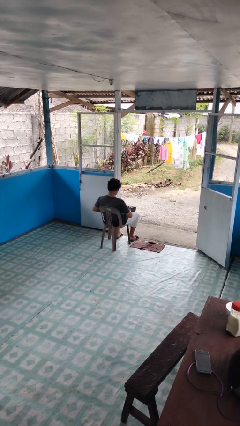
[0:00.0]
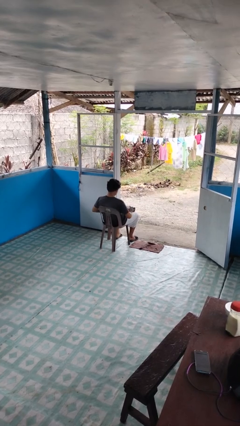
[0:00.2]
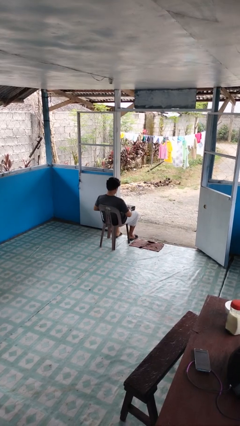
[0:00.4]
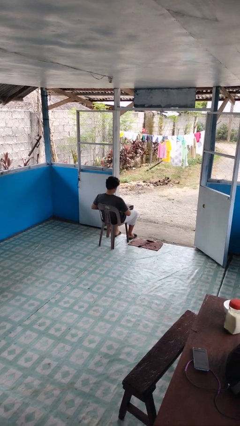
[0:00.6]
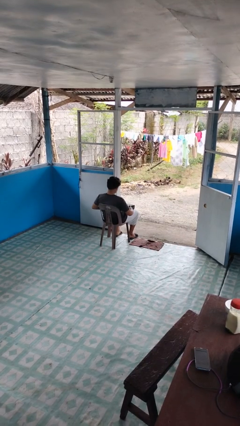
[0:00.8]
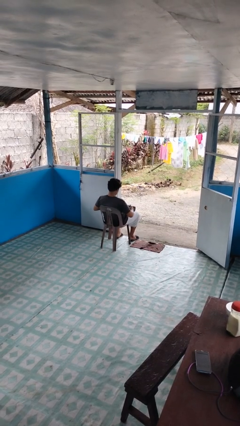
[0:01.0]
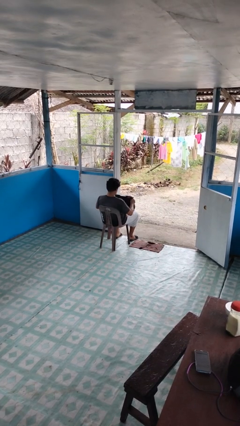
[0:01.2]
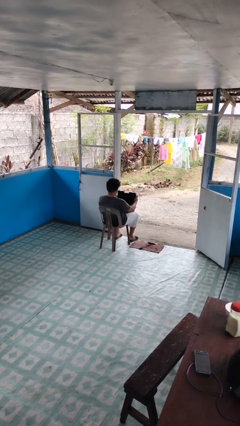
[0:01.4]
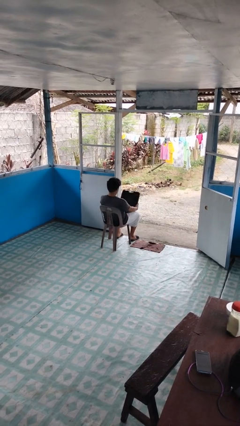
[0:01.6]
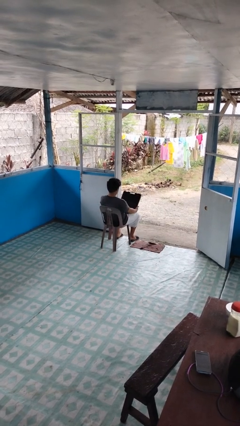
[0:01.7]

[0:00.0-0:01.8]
person opens suitcase

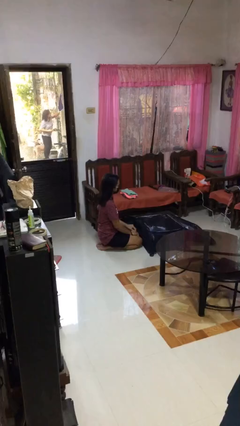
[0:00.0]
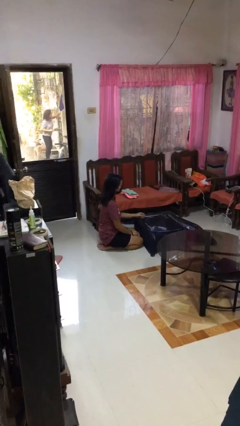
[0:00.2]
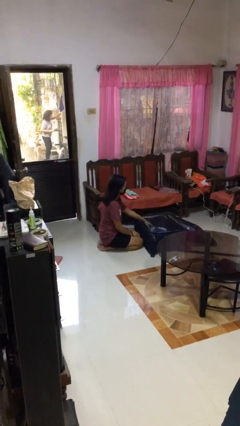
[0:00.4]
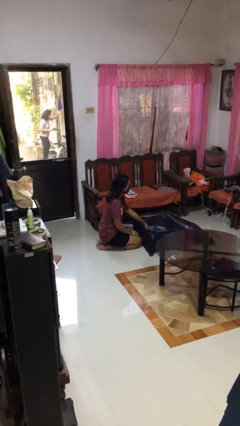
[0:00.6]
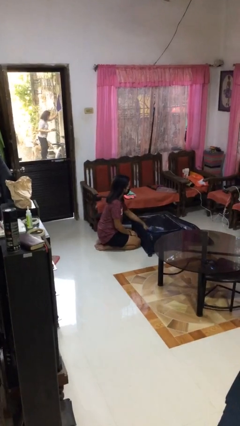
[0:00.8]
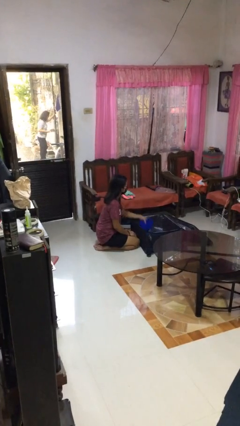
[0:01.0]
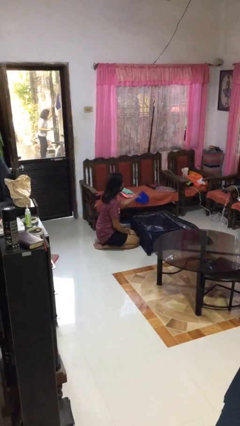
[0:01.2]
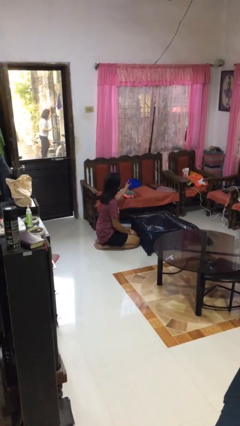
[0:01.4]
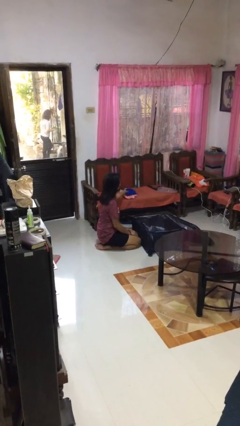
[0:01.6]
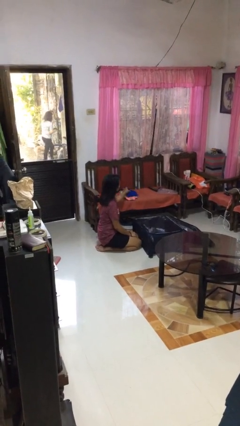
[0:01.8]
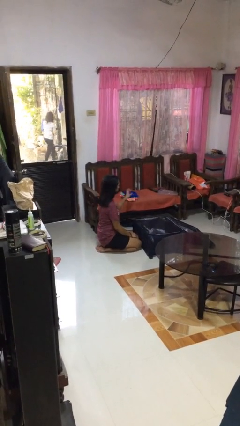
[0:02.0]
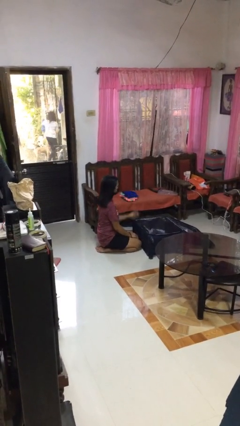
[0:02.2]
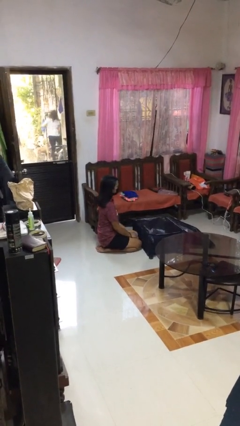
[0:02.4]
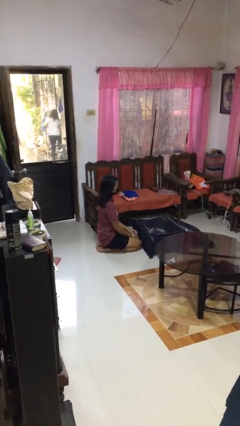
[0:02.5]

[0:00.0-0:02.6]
person unloads clothes from suitcase

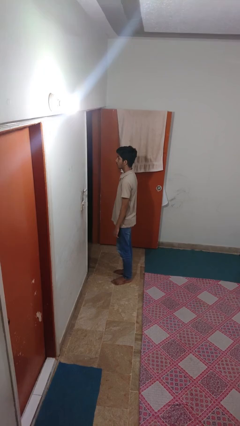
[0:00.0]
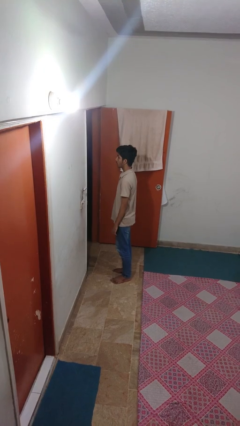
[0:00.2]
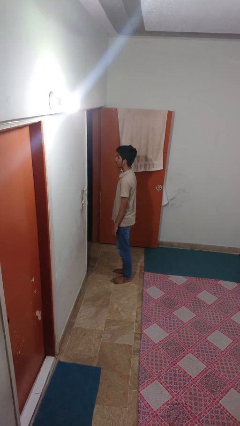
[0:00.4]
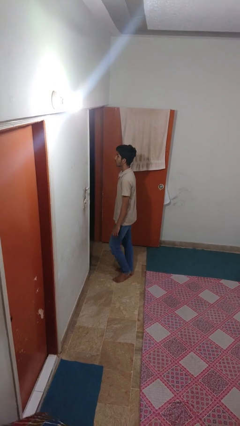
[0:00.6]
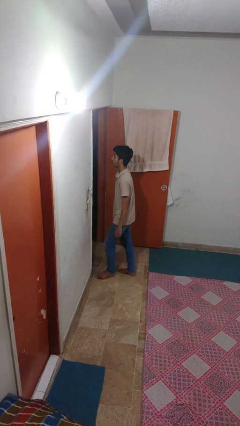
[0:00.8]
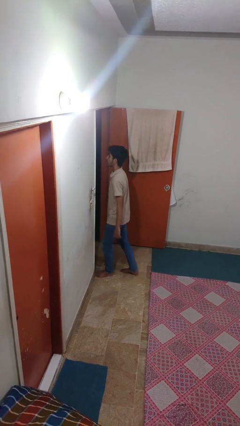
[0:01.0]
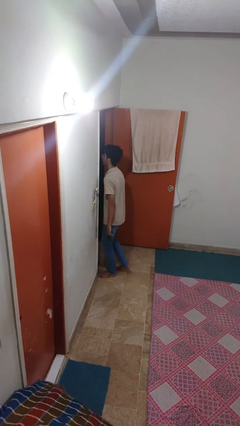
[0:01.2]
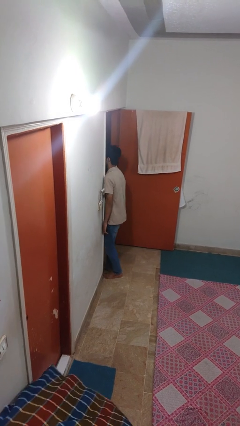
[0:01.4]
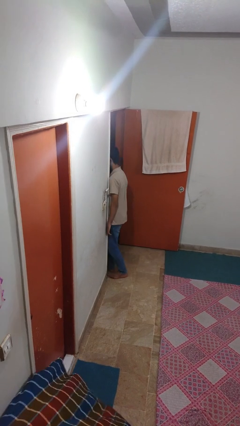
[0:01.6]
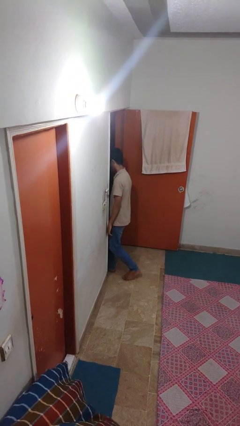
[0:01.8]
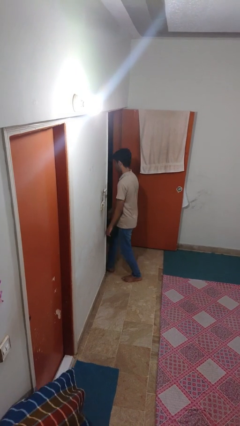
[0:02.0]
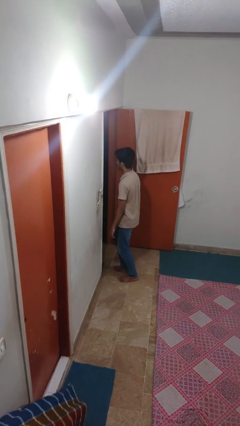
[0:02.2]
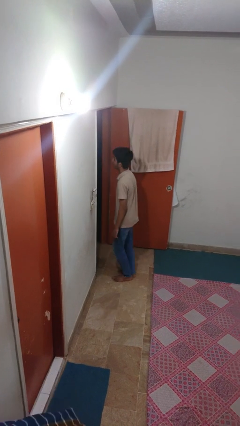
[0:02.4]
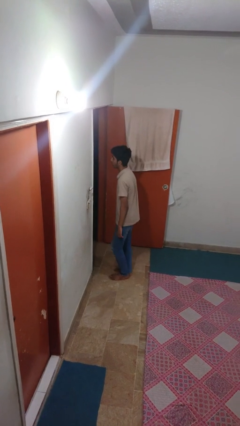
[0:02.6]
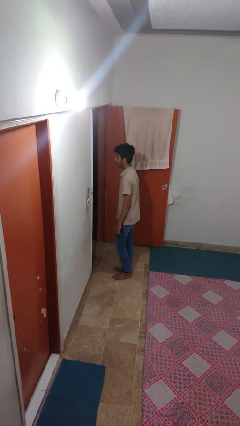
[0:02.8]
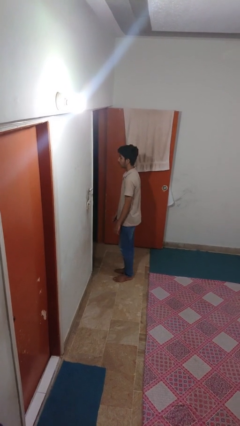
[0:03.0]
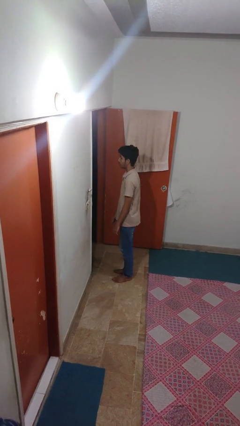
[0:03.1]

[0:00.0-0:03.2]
person bumps into wall

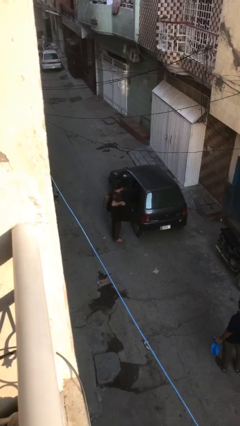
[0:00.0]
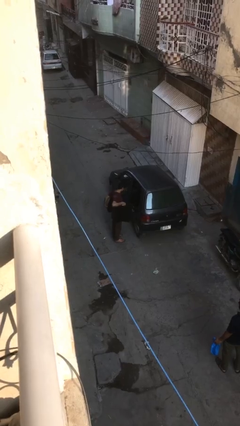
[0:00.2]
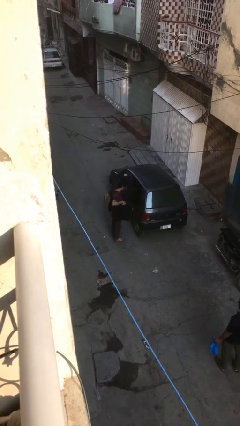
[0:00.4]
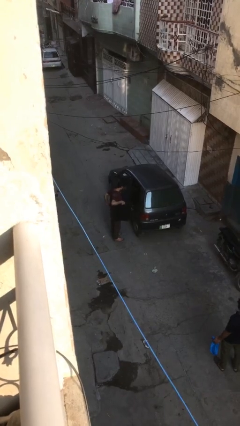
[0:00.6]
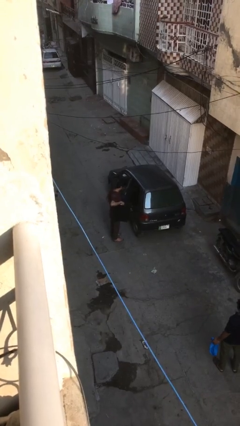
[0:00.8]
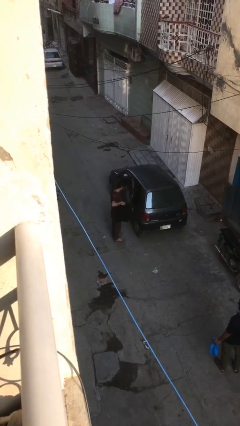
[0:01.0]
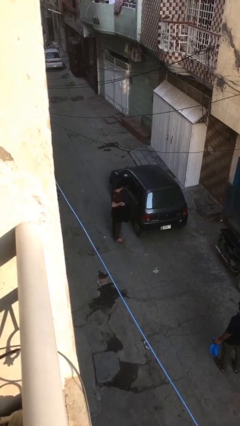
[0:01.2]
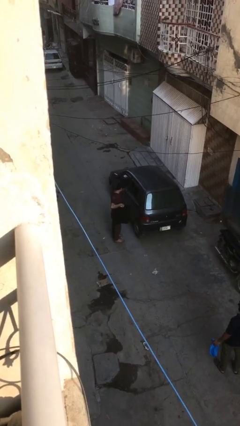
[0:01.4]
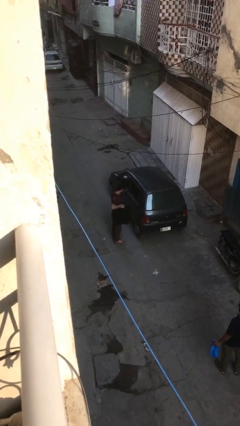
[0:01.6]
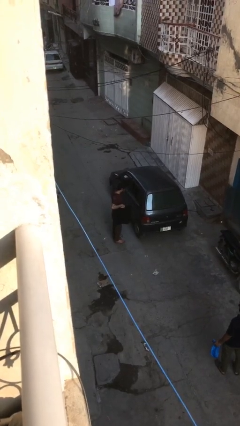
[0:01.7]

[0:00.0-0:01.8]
person closes car door

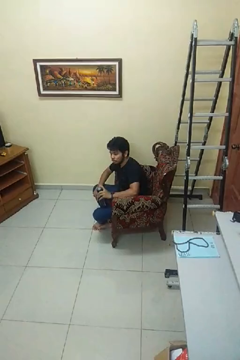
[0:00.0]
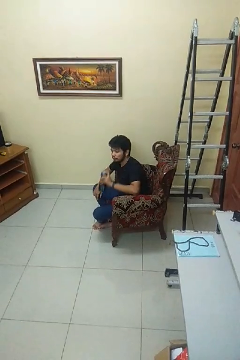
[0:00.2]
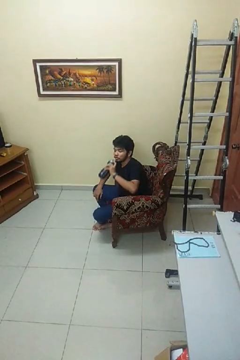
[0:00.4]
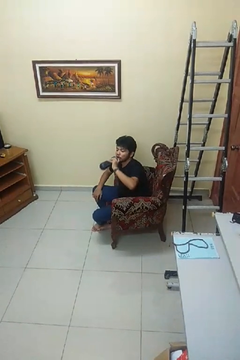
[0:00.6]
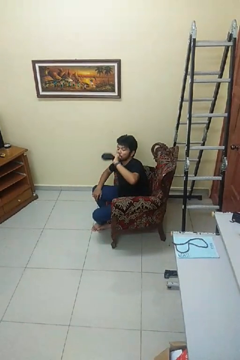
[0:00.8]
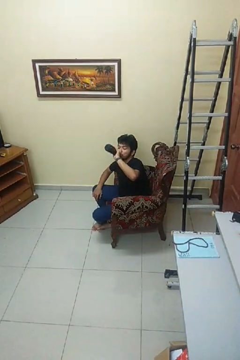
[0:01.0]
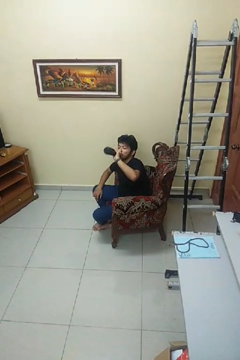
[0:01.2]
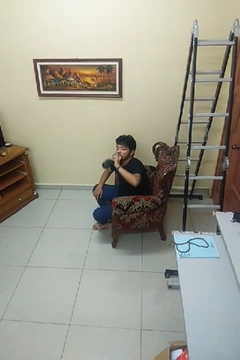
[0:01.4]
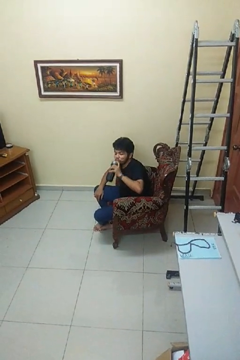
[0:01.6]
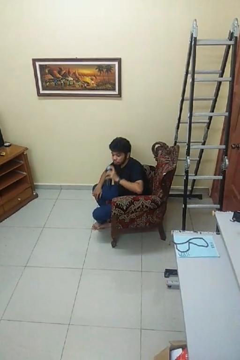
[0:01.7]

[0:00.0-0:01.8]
person drinks from bottle

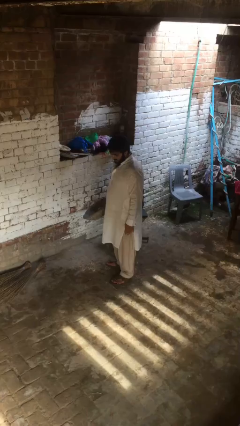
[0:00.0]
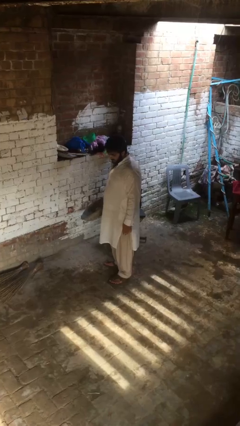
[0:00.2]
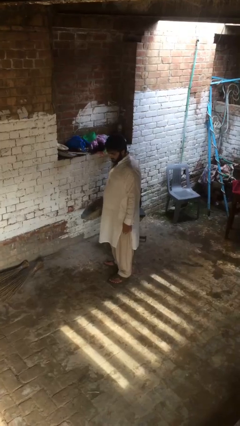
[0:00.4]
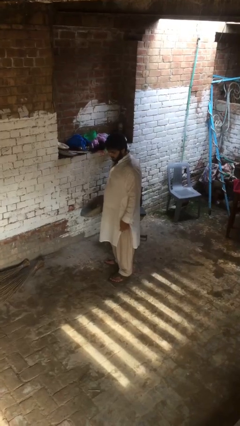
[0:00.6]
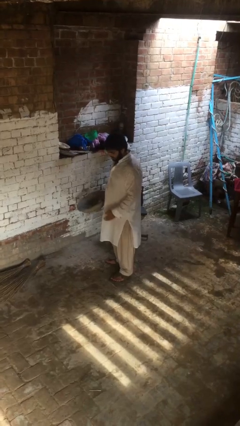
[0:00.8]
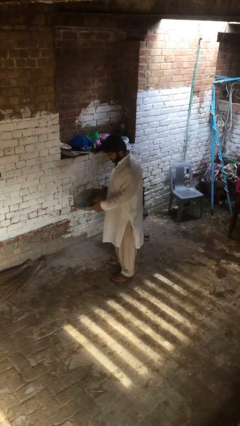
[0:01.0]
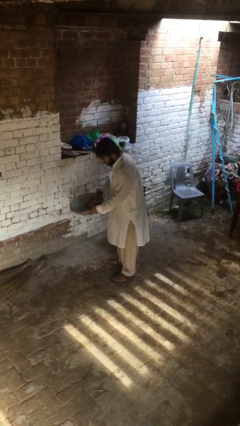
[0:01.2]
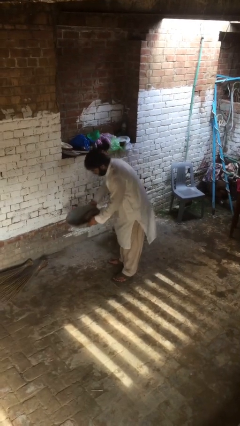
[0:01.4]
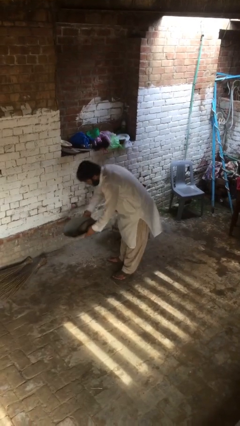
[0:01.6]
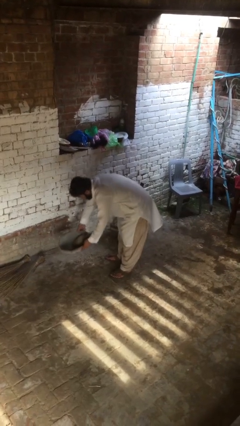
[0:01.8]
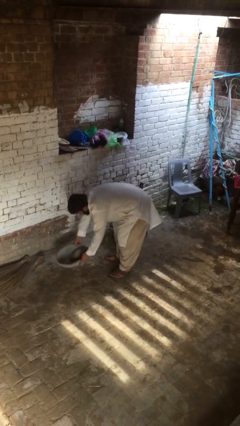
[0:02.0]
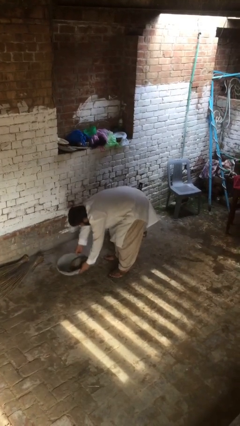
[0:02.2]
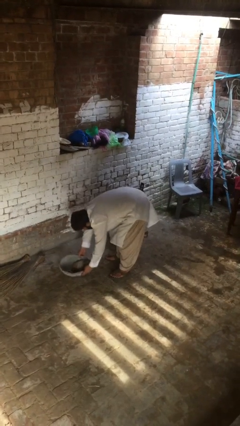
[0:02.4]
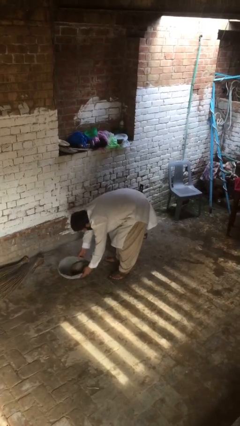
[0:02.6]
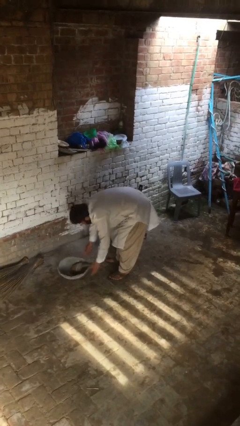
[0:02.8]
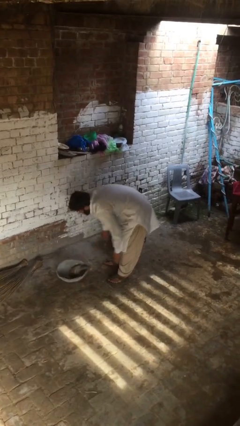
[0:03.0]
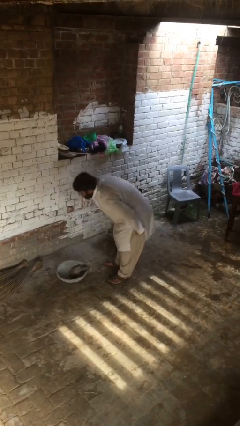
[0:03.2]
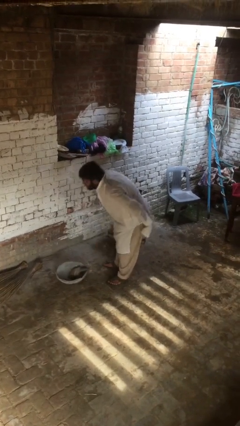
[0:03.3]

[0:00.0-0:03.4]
person puts down object on floor

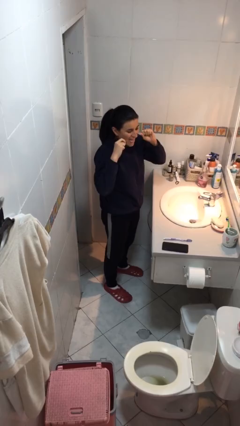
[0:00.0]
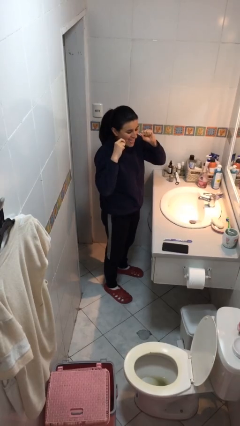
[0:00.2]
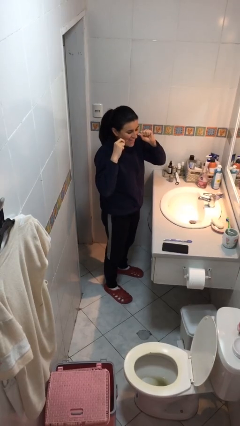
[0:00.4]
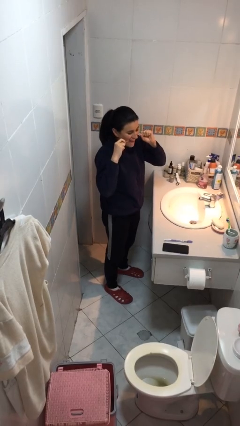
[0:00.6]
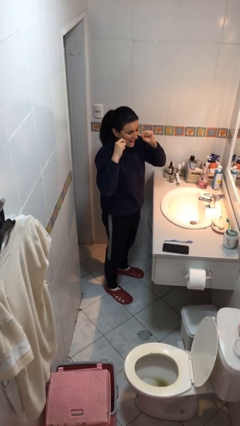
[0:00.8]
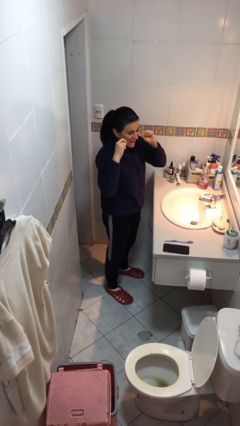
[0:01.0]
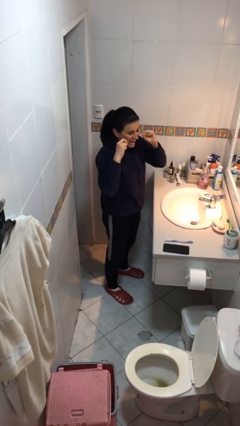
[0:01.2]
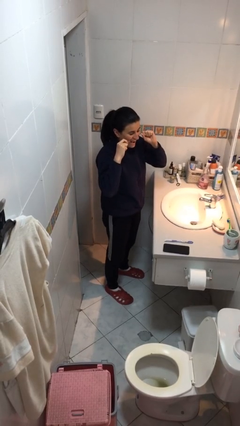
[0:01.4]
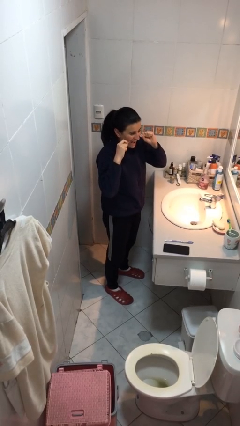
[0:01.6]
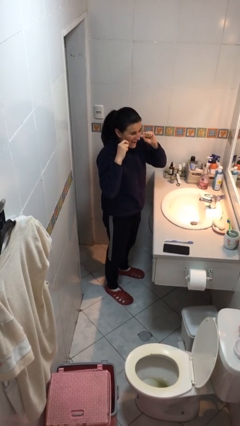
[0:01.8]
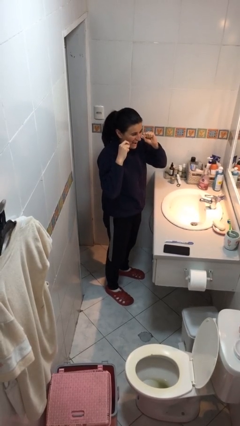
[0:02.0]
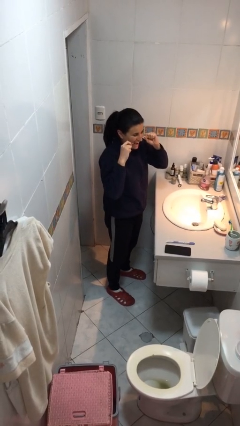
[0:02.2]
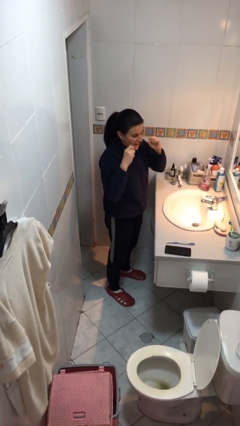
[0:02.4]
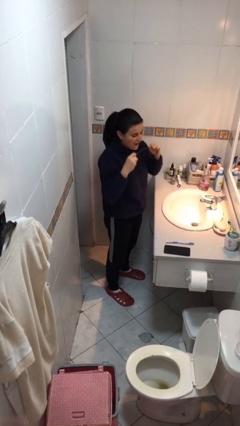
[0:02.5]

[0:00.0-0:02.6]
person flosses

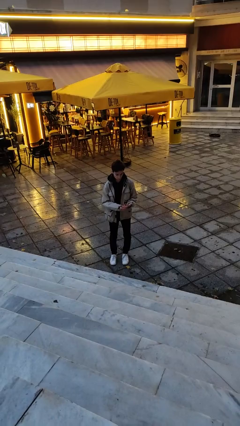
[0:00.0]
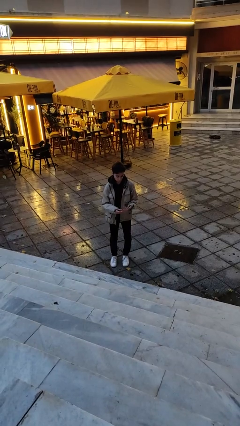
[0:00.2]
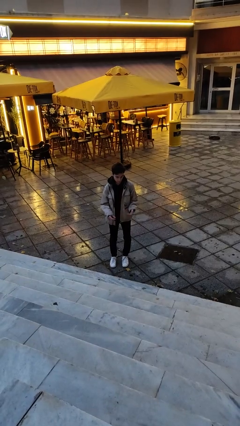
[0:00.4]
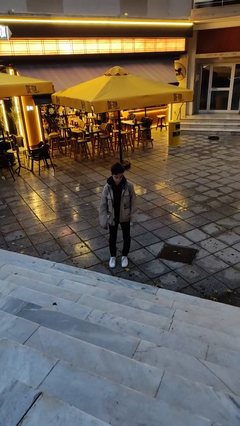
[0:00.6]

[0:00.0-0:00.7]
person takes off ring
